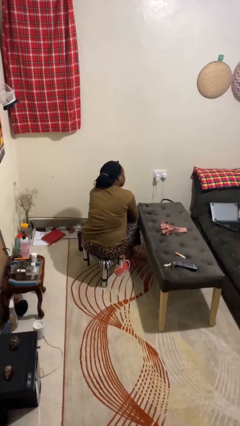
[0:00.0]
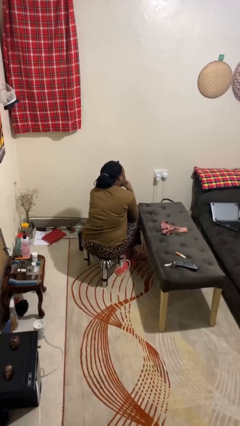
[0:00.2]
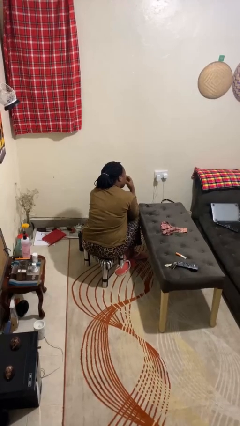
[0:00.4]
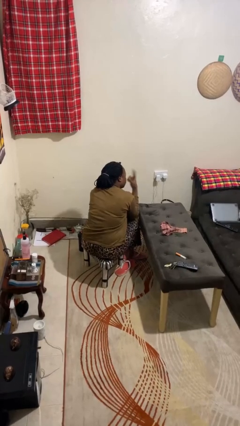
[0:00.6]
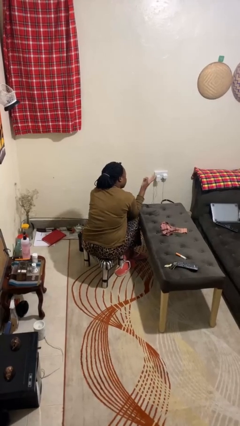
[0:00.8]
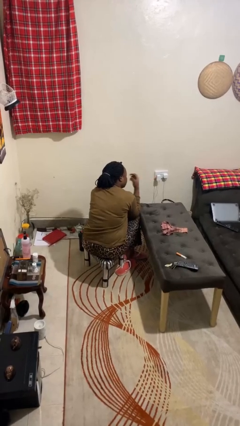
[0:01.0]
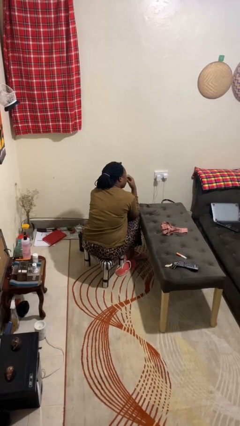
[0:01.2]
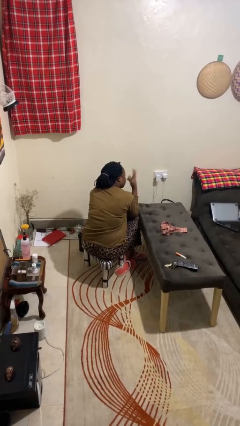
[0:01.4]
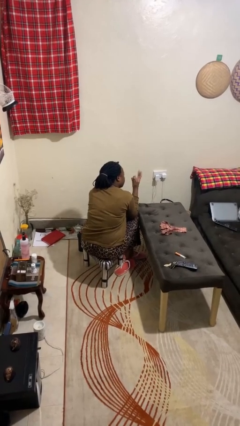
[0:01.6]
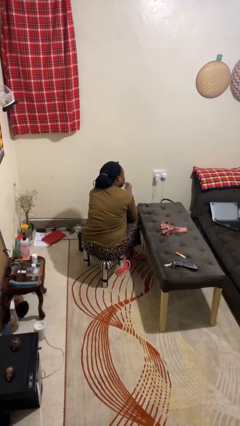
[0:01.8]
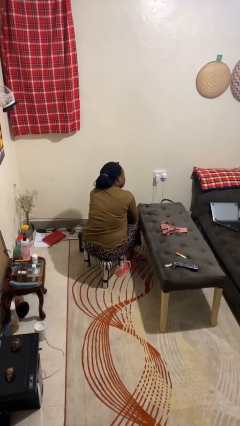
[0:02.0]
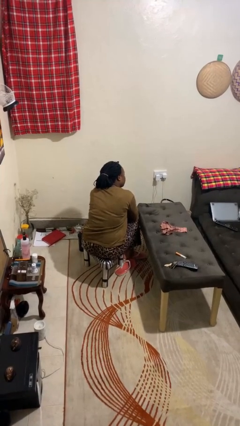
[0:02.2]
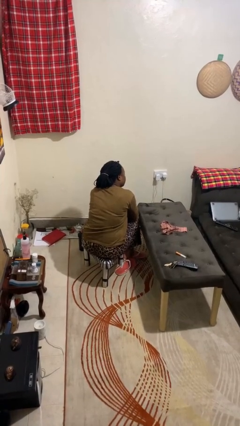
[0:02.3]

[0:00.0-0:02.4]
person gestures watch closely

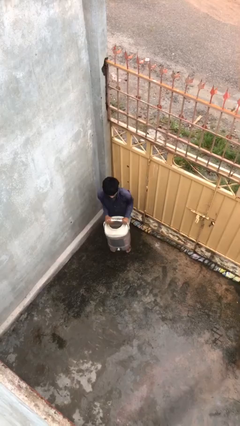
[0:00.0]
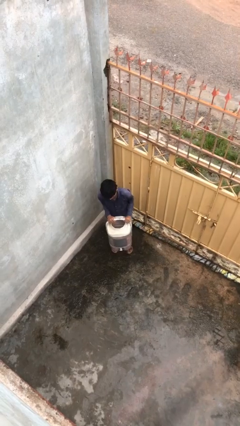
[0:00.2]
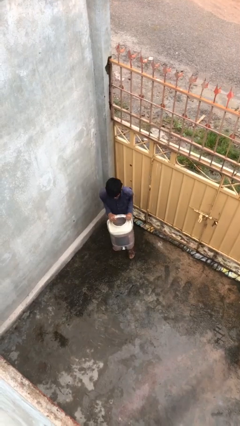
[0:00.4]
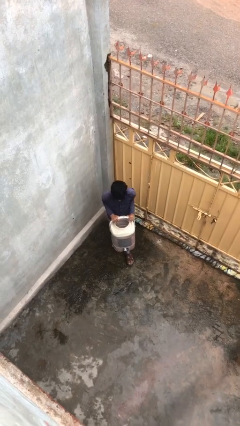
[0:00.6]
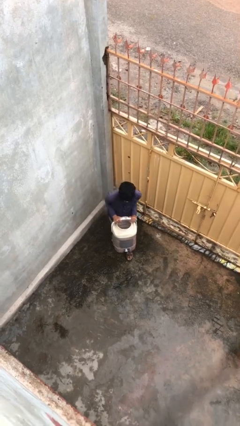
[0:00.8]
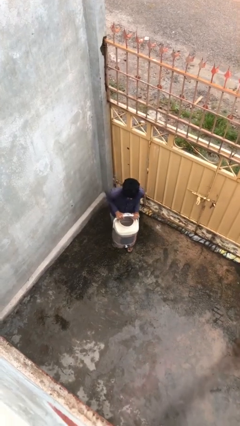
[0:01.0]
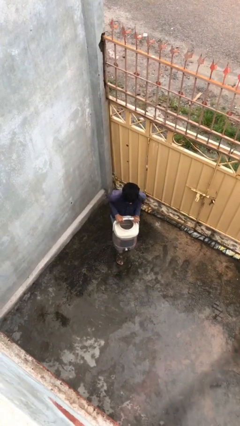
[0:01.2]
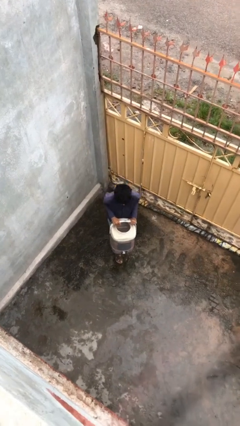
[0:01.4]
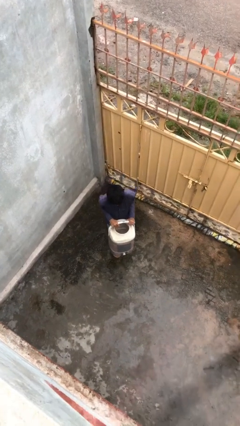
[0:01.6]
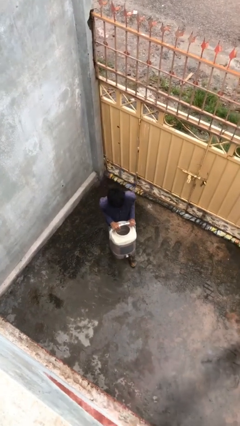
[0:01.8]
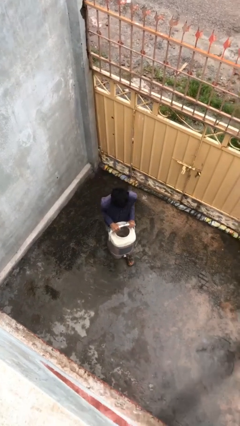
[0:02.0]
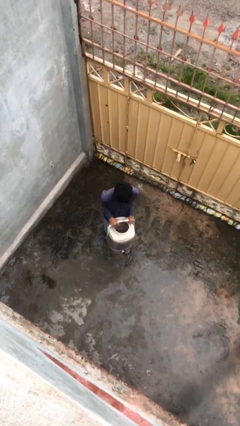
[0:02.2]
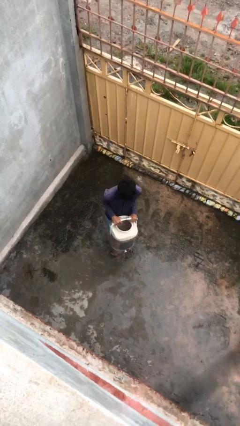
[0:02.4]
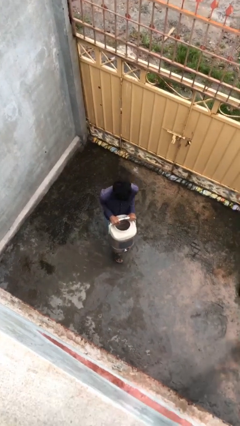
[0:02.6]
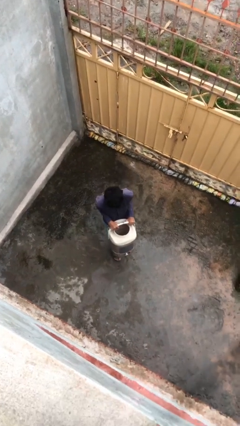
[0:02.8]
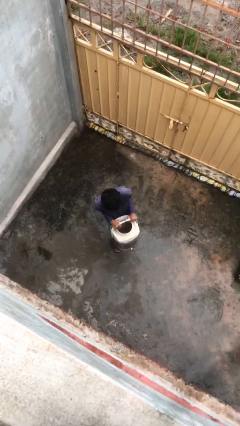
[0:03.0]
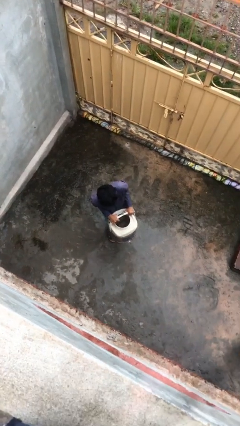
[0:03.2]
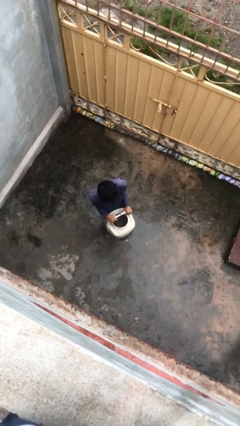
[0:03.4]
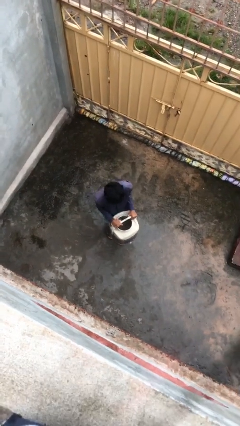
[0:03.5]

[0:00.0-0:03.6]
person carries heavy object

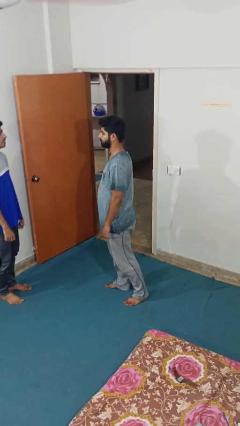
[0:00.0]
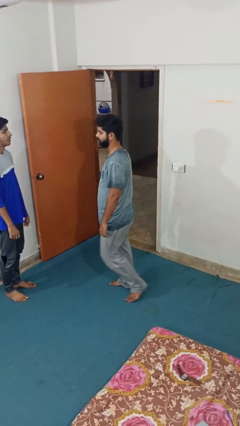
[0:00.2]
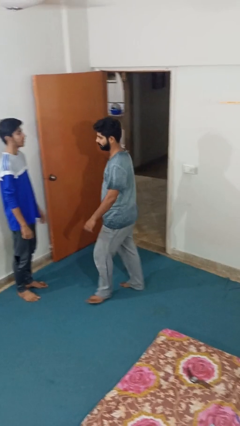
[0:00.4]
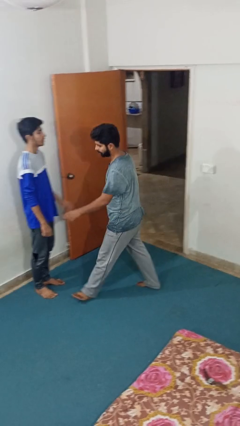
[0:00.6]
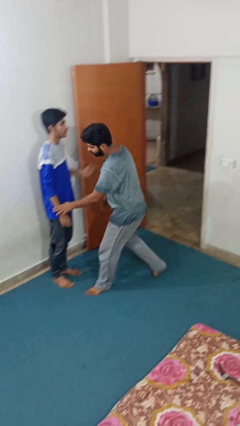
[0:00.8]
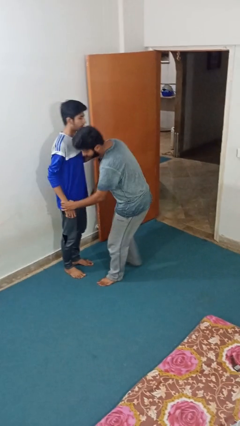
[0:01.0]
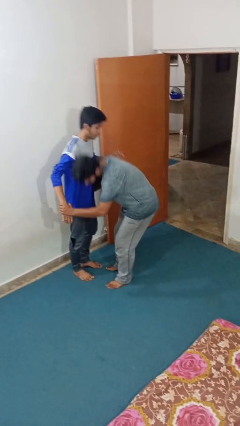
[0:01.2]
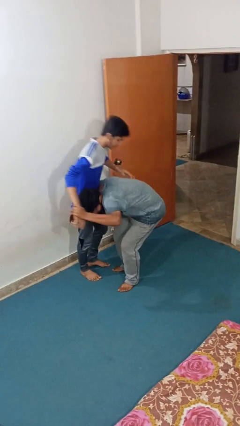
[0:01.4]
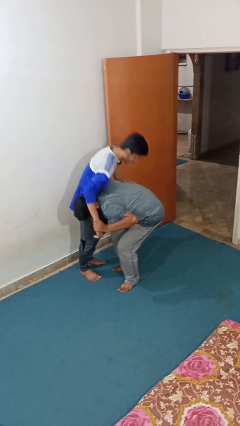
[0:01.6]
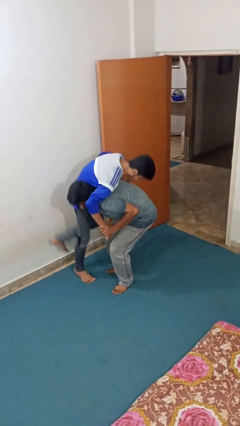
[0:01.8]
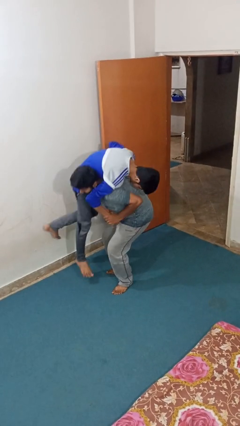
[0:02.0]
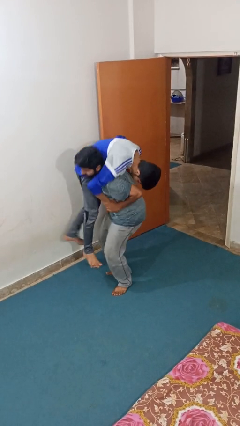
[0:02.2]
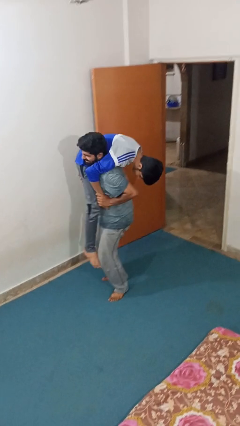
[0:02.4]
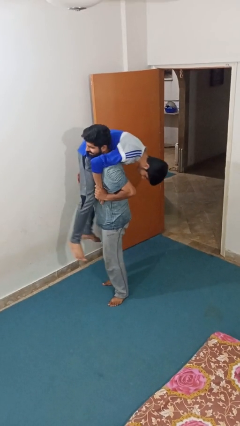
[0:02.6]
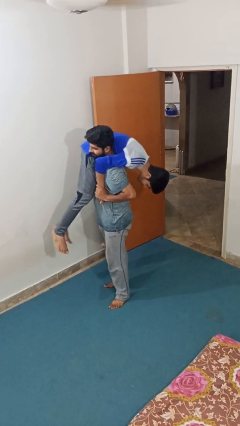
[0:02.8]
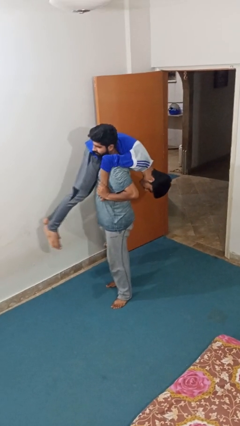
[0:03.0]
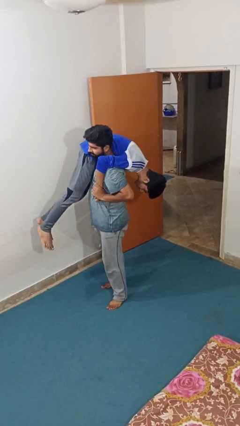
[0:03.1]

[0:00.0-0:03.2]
person carries person over shoulder

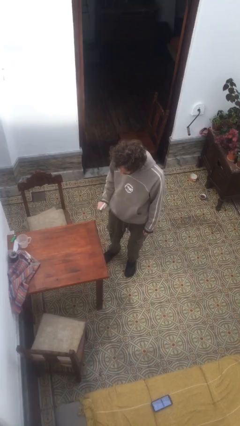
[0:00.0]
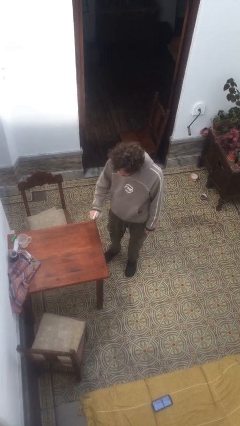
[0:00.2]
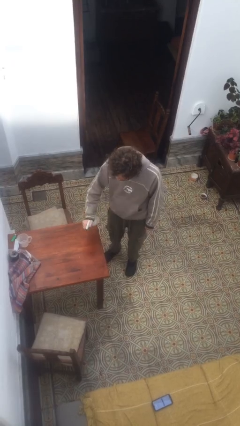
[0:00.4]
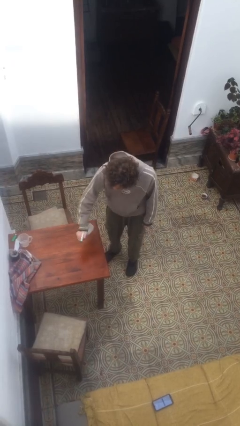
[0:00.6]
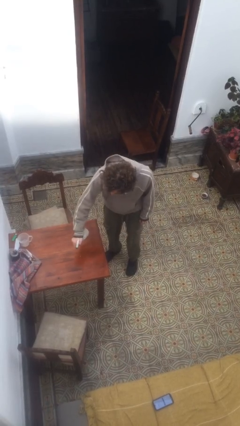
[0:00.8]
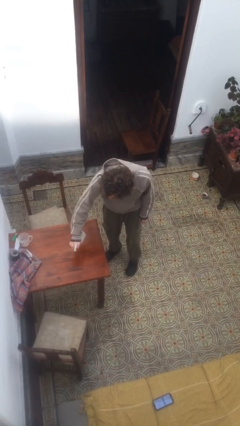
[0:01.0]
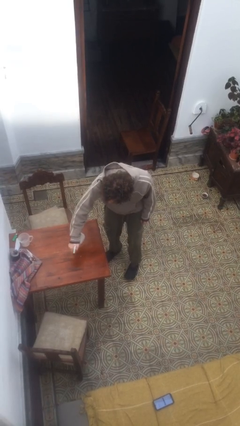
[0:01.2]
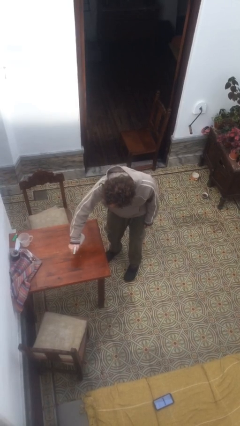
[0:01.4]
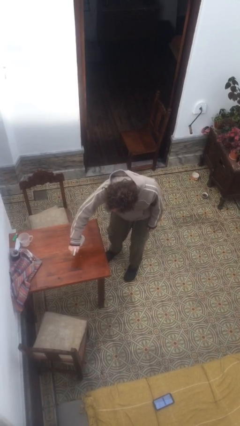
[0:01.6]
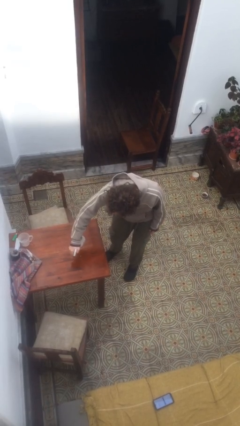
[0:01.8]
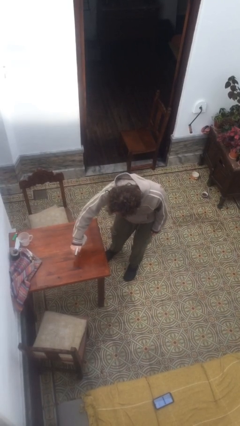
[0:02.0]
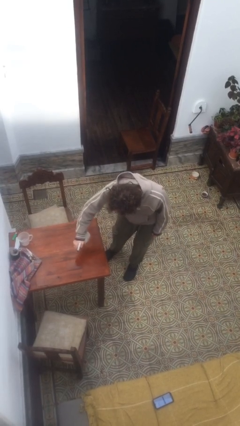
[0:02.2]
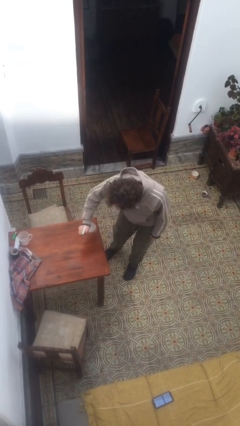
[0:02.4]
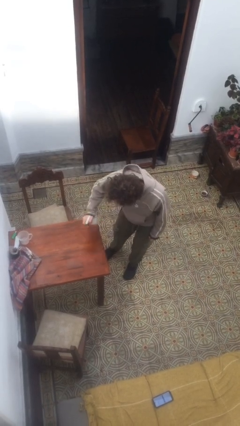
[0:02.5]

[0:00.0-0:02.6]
person sprays from bottle

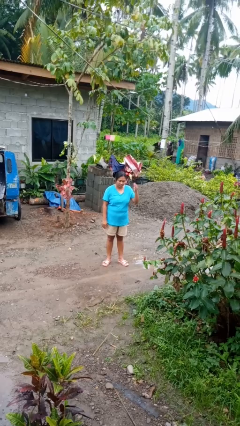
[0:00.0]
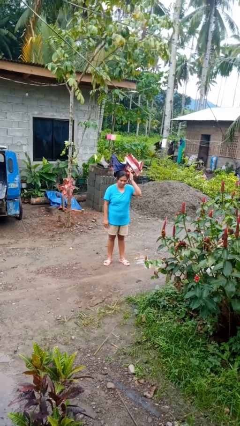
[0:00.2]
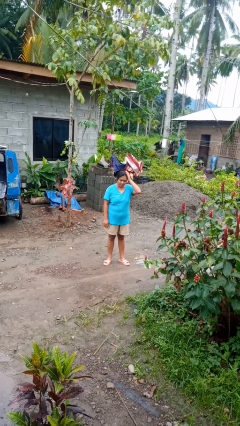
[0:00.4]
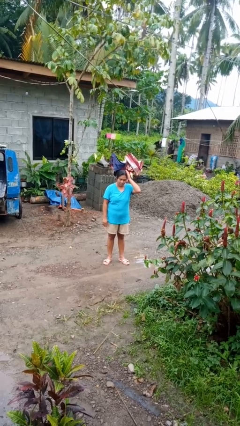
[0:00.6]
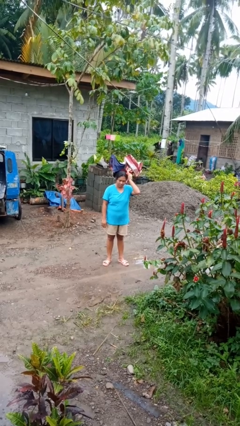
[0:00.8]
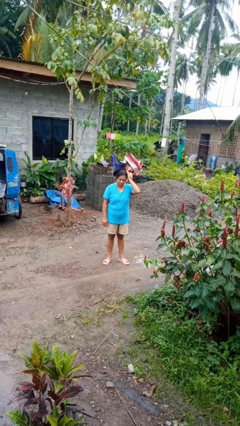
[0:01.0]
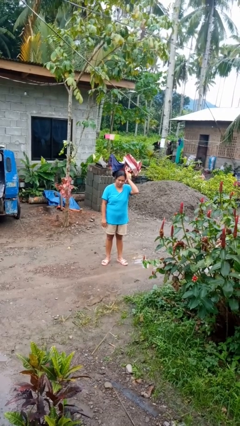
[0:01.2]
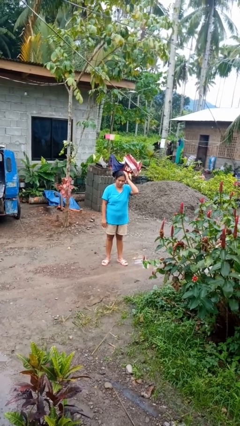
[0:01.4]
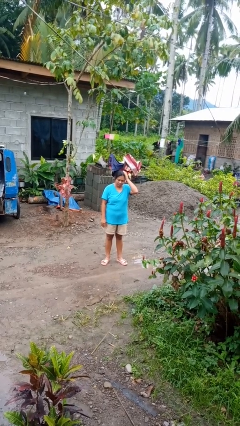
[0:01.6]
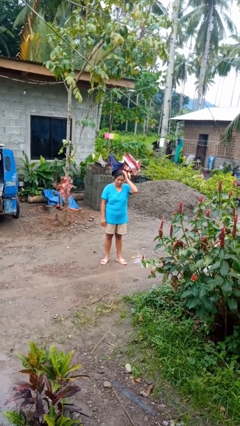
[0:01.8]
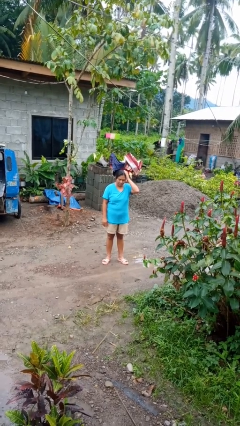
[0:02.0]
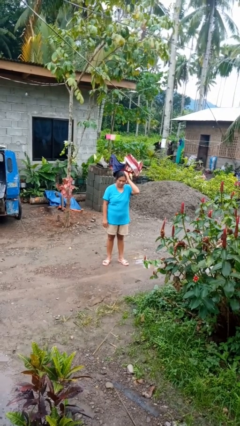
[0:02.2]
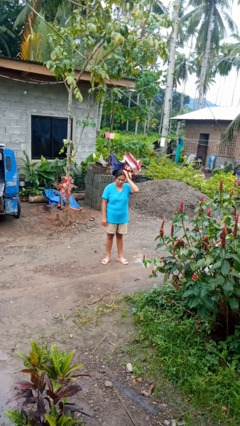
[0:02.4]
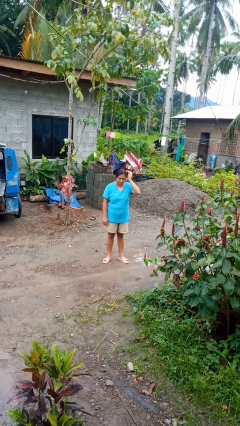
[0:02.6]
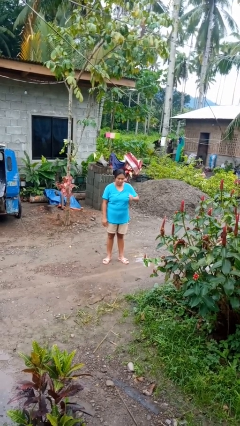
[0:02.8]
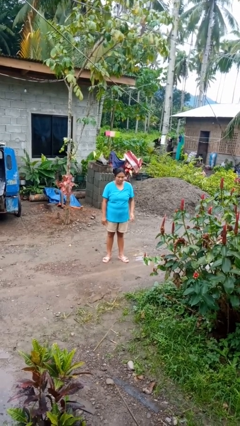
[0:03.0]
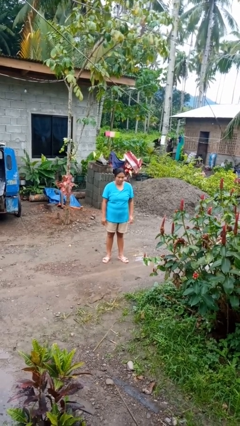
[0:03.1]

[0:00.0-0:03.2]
person pats head

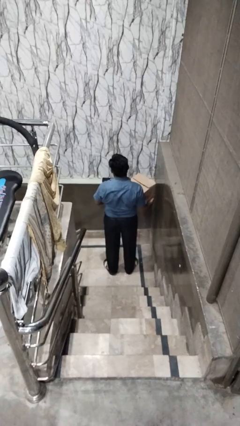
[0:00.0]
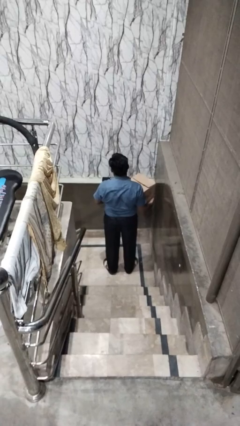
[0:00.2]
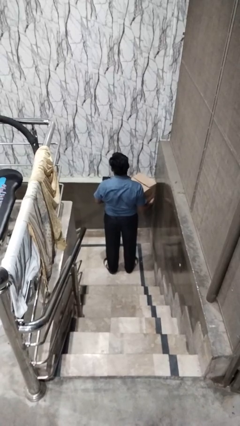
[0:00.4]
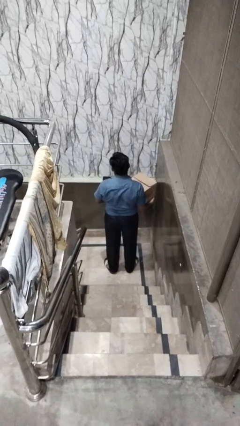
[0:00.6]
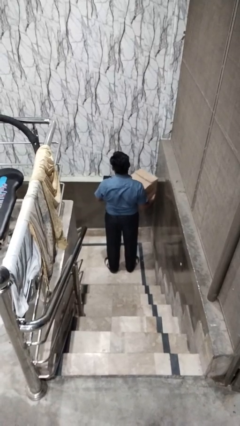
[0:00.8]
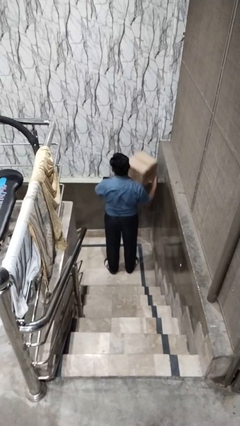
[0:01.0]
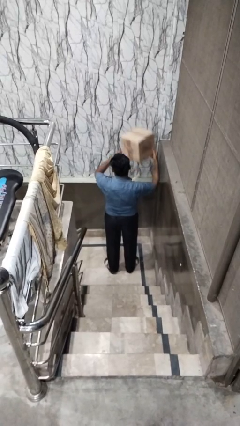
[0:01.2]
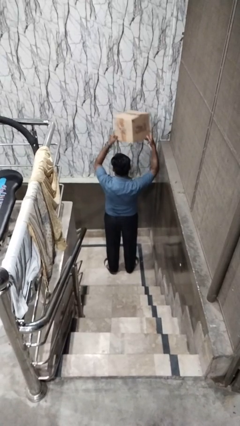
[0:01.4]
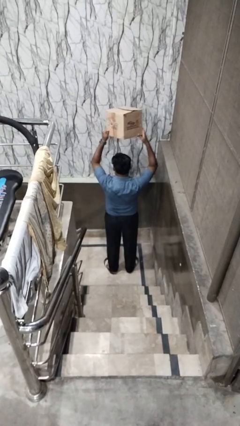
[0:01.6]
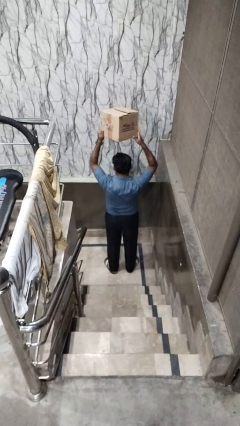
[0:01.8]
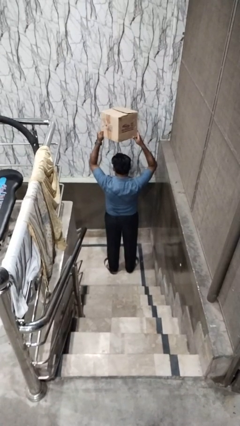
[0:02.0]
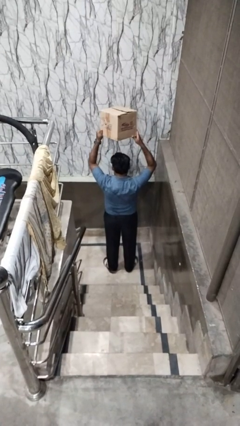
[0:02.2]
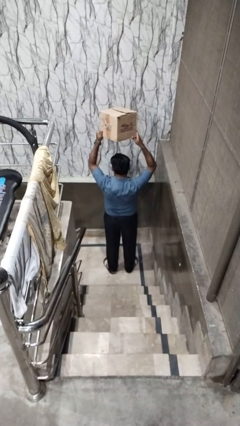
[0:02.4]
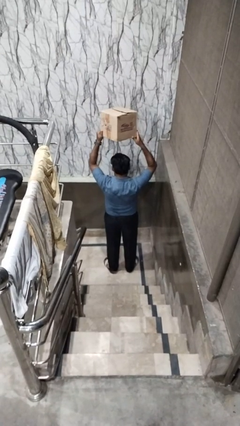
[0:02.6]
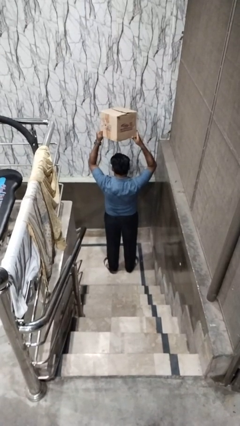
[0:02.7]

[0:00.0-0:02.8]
person holds object above head
